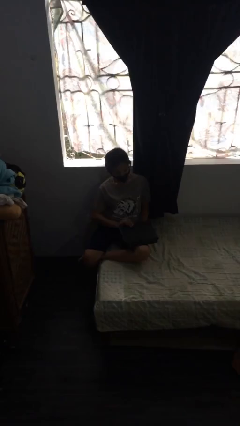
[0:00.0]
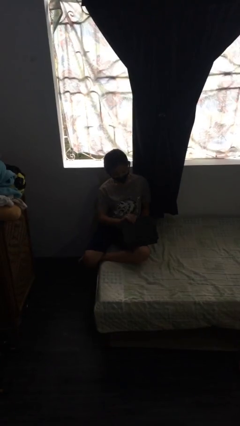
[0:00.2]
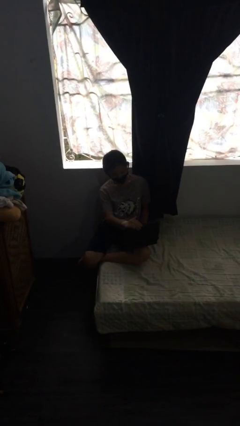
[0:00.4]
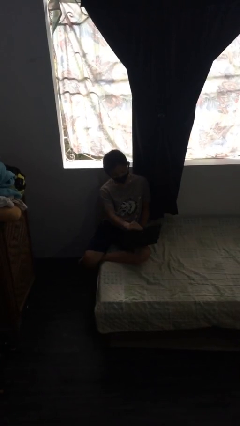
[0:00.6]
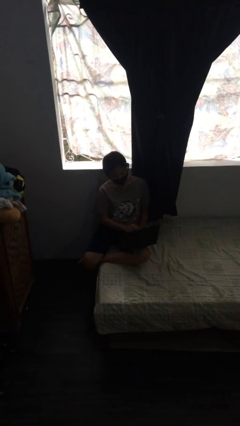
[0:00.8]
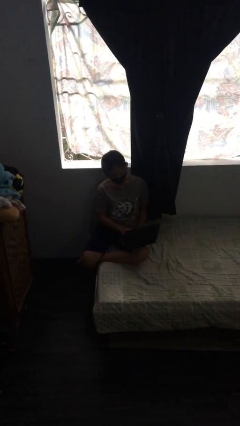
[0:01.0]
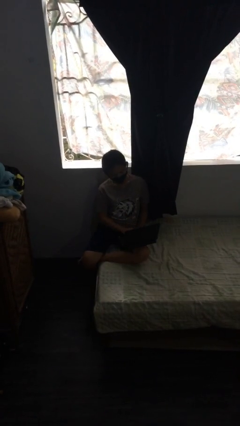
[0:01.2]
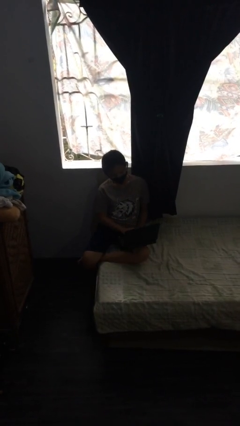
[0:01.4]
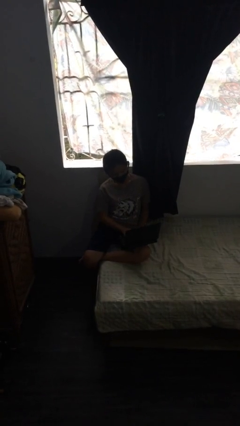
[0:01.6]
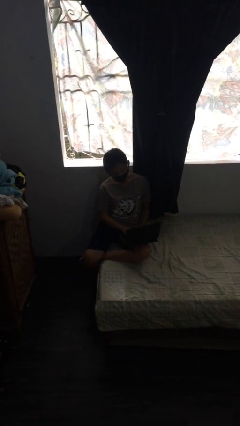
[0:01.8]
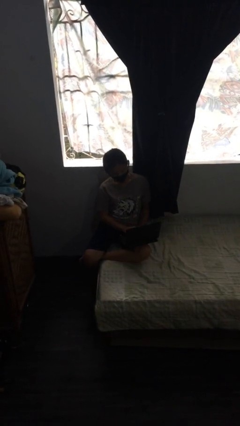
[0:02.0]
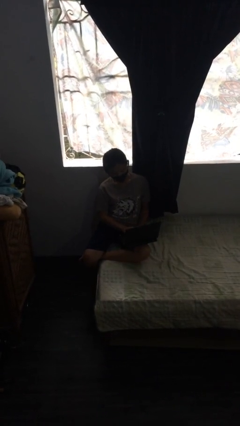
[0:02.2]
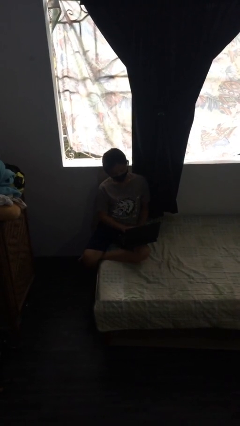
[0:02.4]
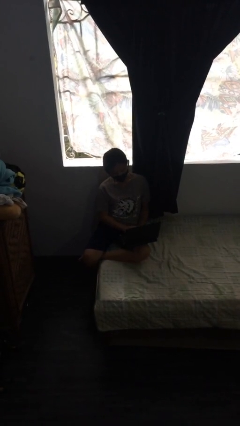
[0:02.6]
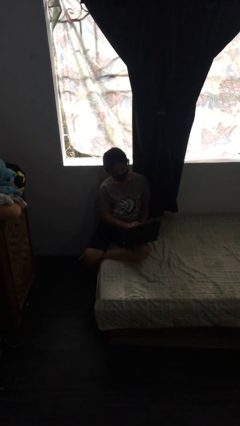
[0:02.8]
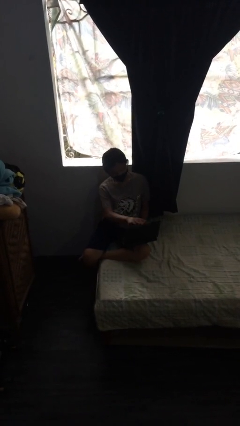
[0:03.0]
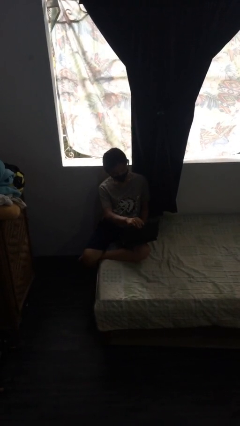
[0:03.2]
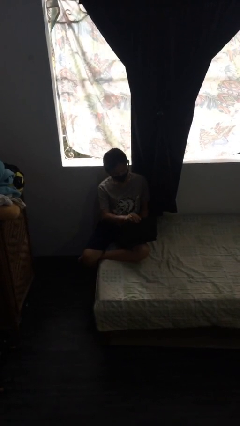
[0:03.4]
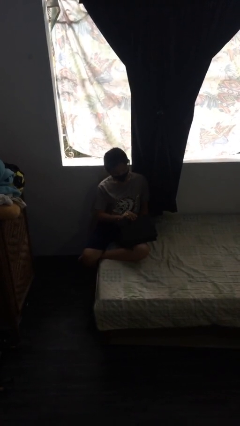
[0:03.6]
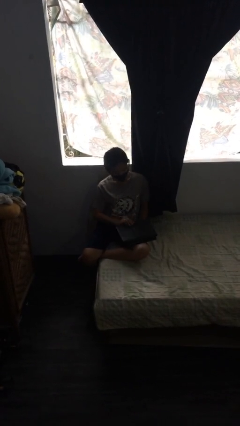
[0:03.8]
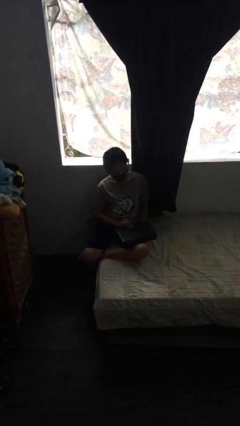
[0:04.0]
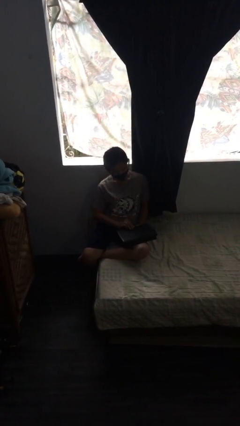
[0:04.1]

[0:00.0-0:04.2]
person interacts with laptop

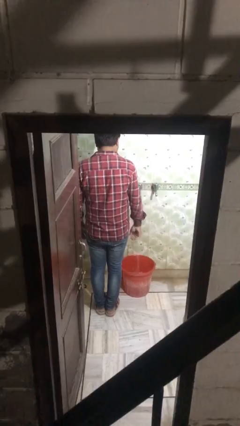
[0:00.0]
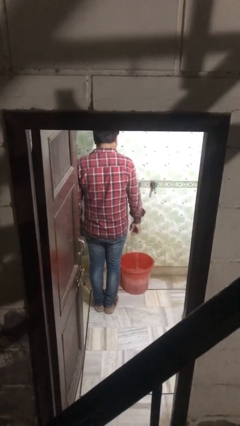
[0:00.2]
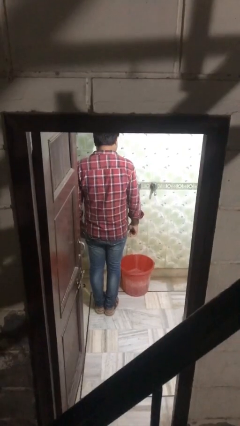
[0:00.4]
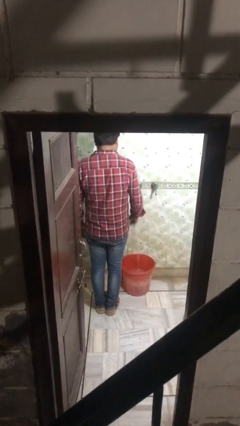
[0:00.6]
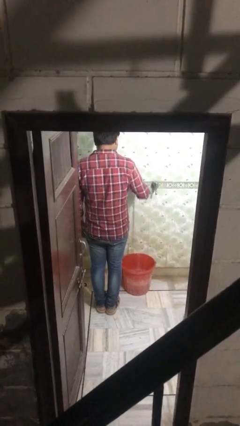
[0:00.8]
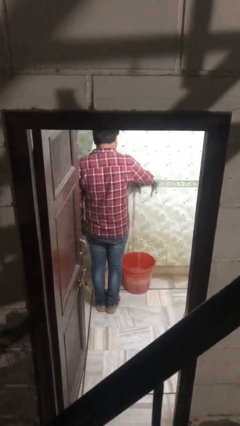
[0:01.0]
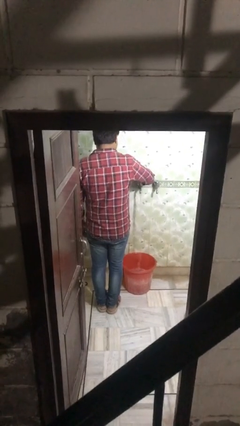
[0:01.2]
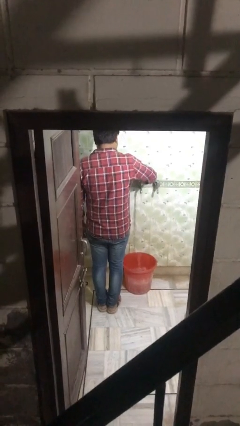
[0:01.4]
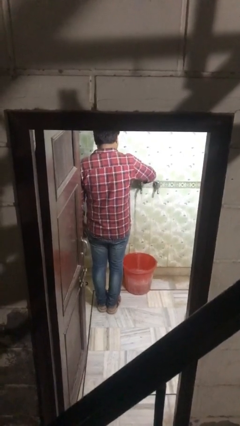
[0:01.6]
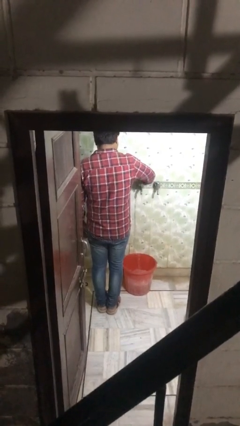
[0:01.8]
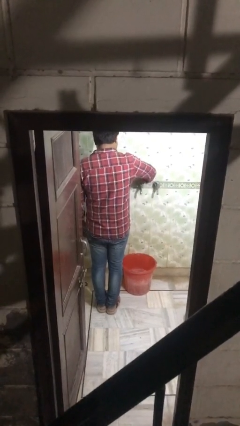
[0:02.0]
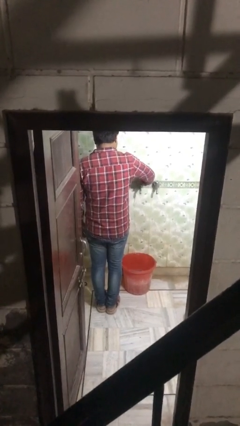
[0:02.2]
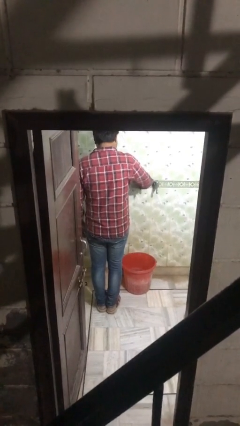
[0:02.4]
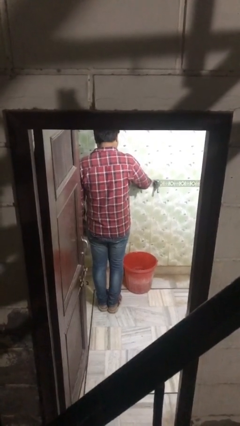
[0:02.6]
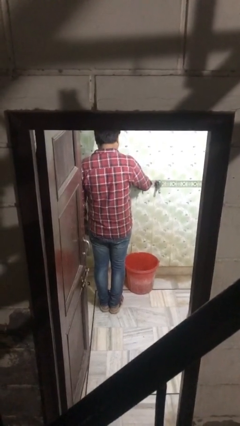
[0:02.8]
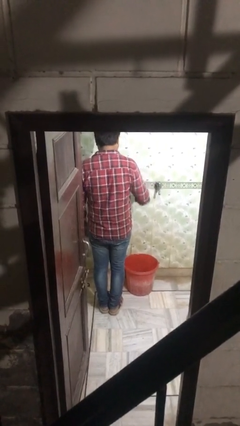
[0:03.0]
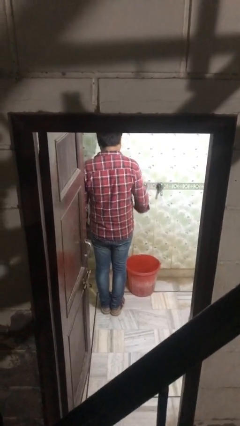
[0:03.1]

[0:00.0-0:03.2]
person turns off faucet

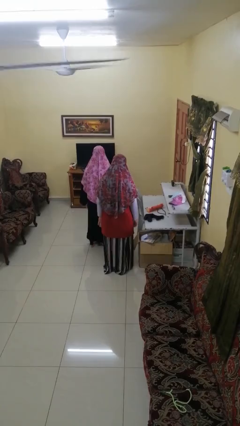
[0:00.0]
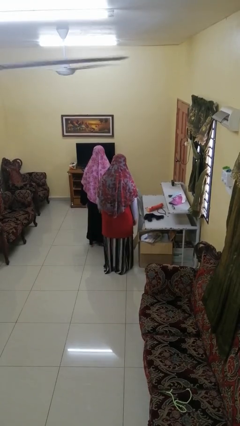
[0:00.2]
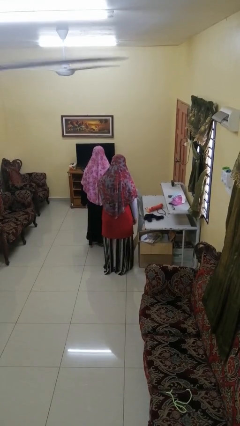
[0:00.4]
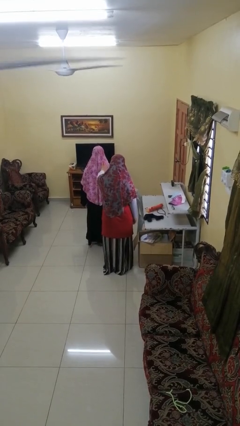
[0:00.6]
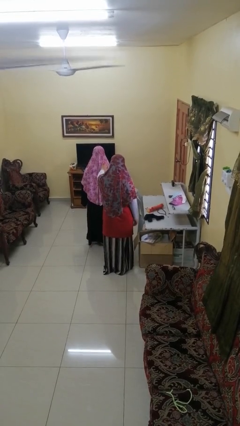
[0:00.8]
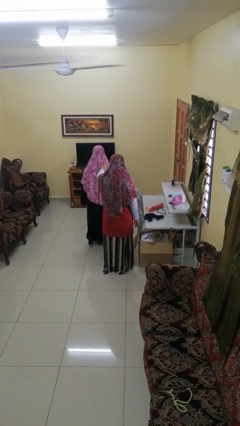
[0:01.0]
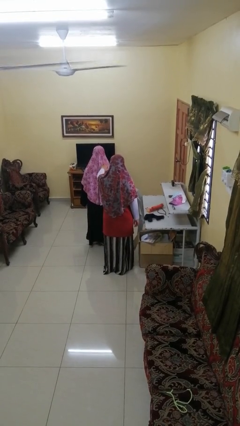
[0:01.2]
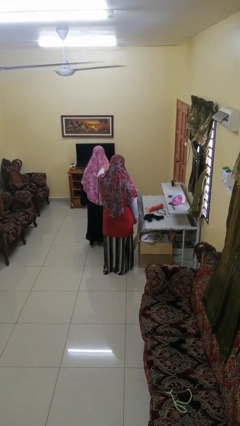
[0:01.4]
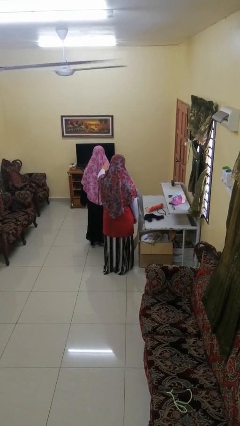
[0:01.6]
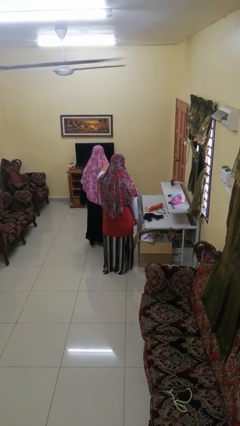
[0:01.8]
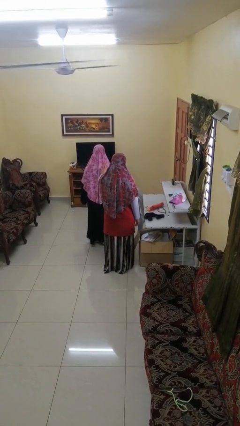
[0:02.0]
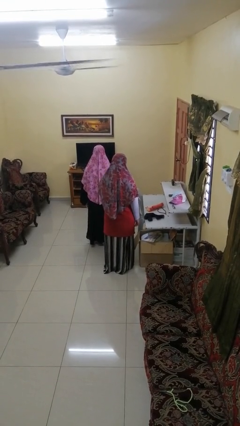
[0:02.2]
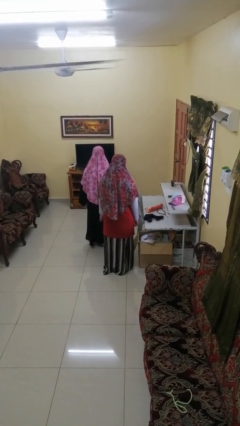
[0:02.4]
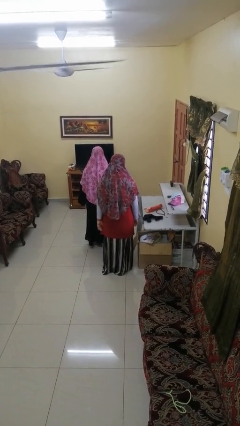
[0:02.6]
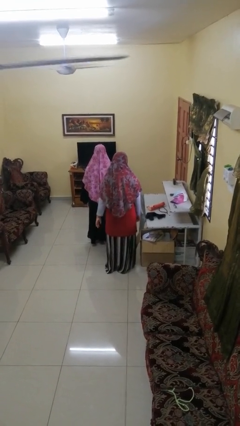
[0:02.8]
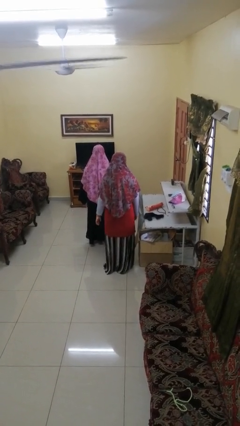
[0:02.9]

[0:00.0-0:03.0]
person touches back of person

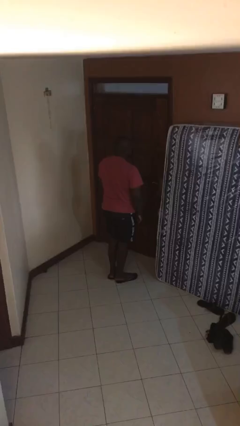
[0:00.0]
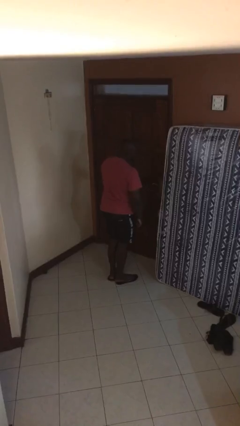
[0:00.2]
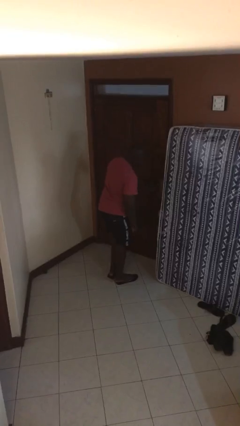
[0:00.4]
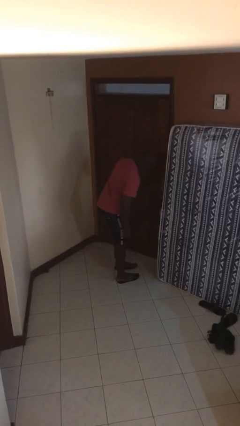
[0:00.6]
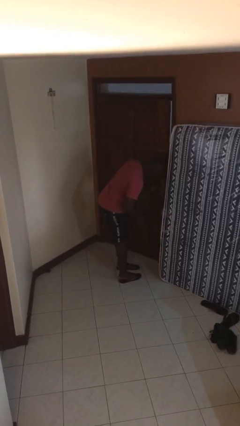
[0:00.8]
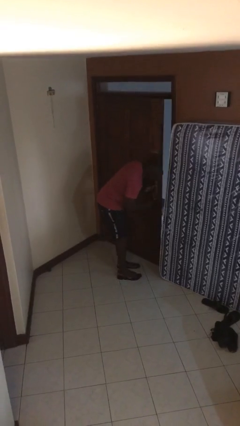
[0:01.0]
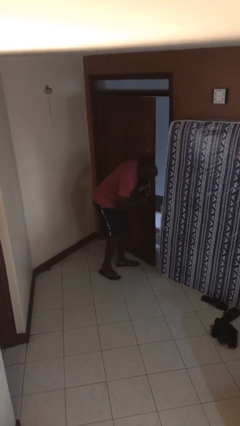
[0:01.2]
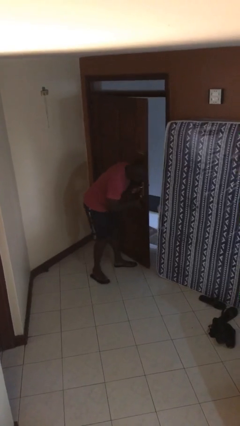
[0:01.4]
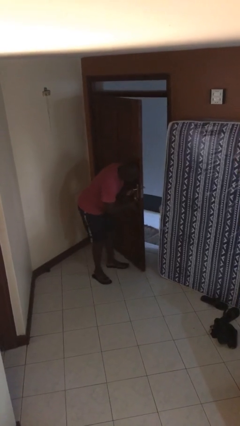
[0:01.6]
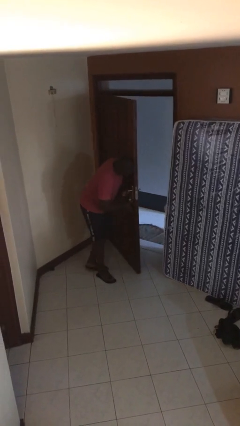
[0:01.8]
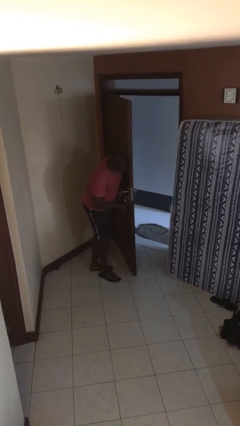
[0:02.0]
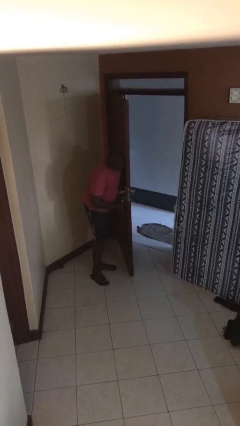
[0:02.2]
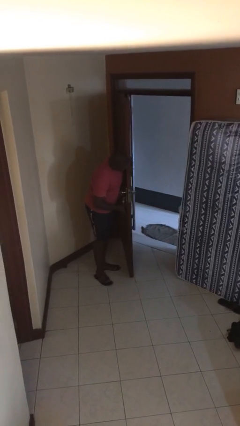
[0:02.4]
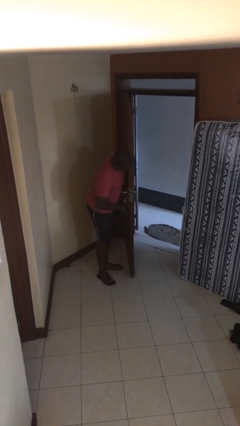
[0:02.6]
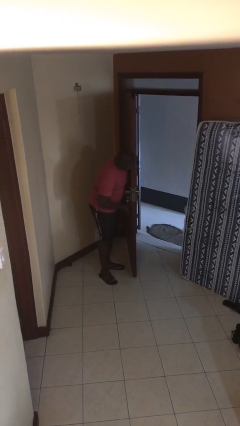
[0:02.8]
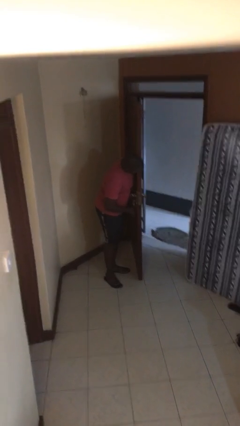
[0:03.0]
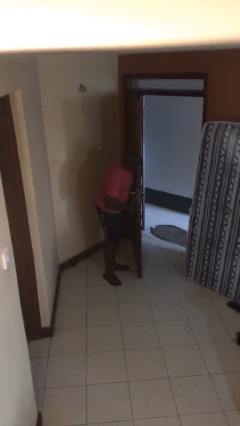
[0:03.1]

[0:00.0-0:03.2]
person opens facility door

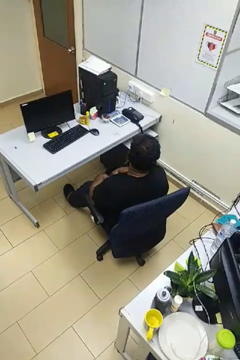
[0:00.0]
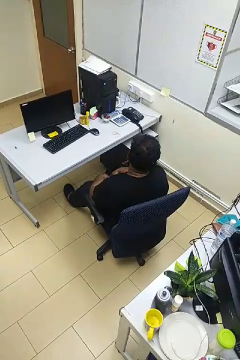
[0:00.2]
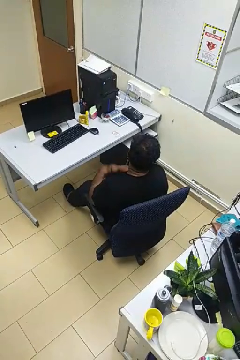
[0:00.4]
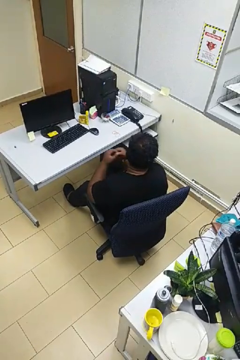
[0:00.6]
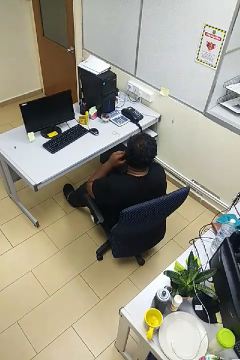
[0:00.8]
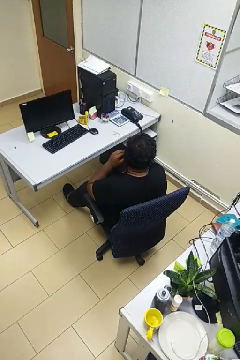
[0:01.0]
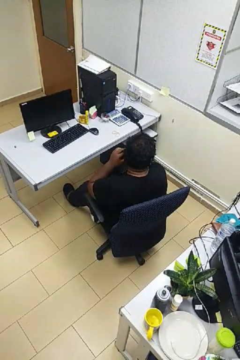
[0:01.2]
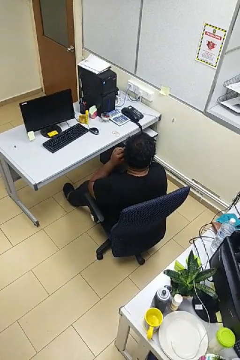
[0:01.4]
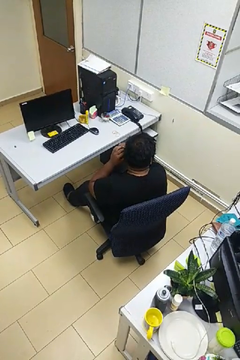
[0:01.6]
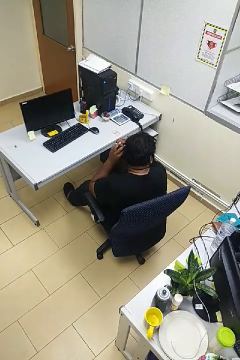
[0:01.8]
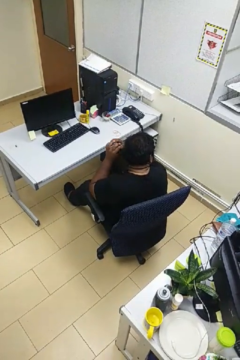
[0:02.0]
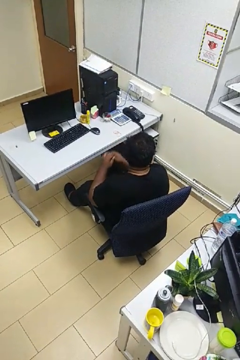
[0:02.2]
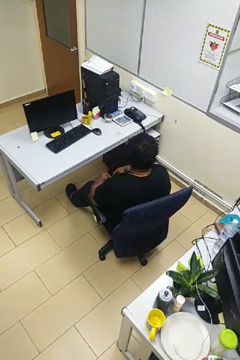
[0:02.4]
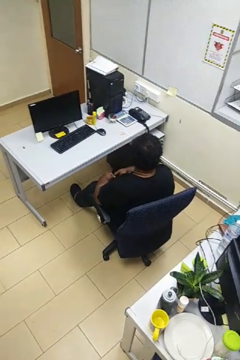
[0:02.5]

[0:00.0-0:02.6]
person takes off earrings

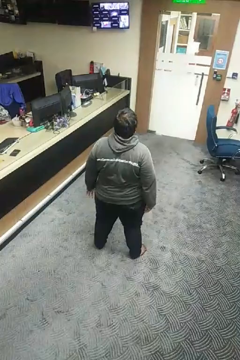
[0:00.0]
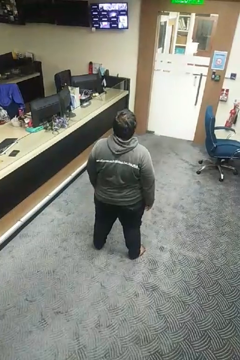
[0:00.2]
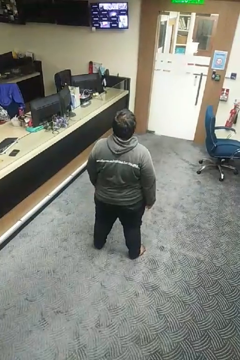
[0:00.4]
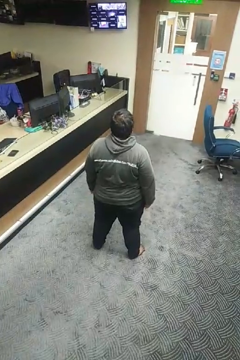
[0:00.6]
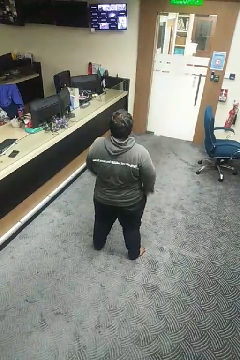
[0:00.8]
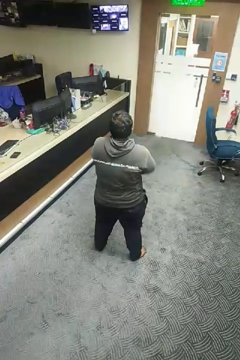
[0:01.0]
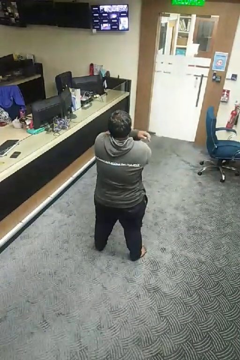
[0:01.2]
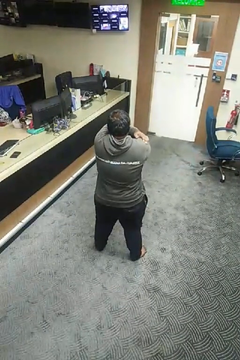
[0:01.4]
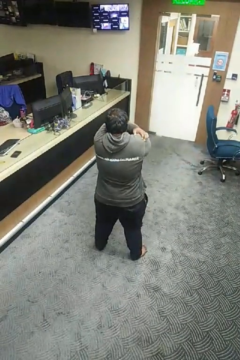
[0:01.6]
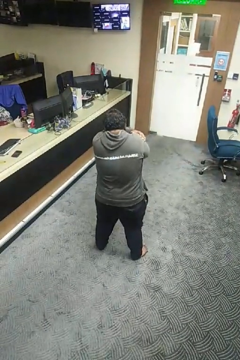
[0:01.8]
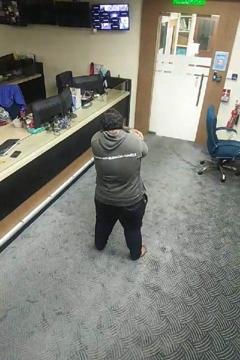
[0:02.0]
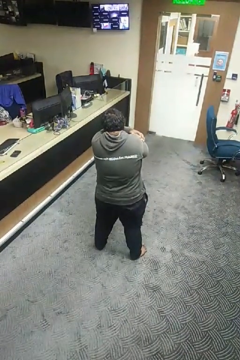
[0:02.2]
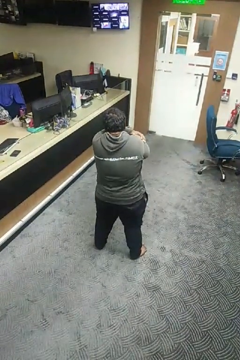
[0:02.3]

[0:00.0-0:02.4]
person sneezes into arm
